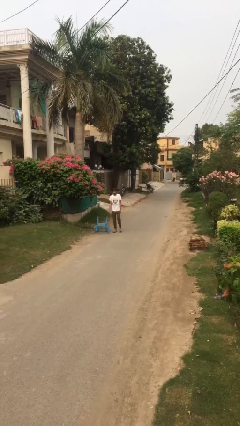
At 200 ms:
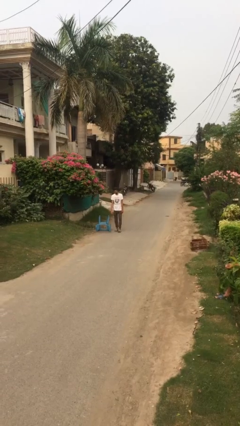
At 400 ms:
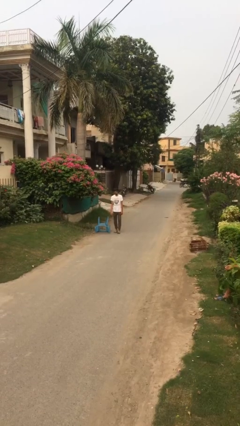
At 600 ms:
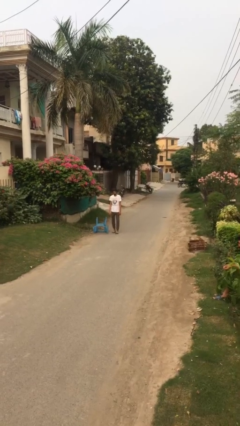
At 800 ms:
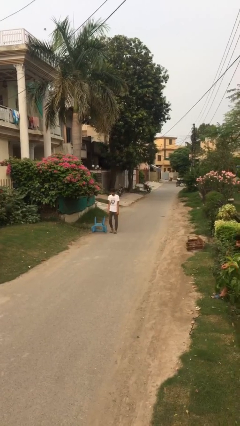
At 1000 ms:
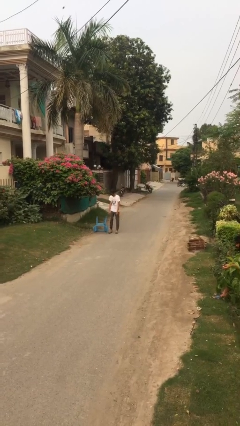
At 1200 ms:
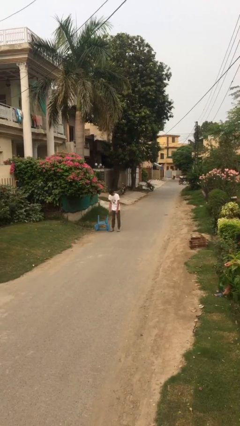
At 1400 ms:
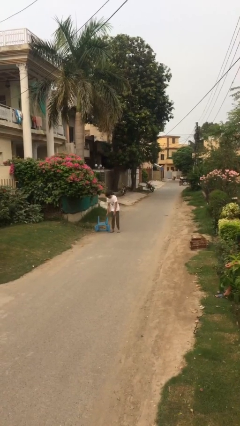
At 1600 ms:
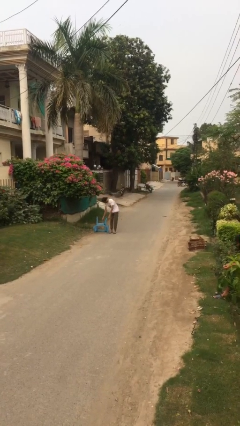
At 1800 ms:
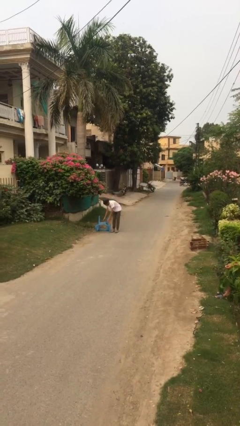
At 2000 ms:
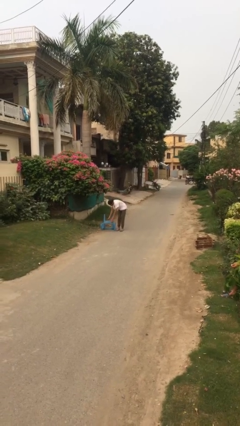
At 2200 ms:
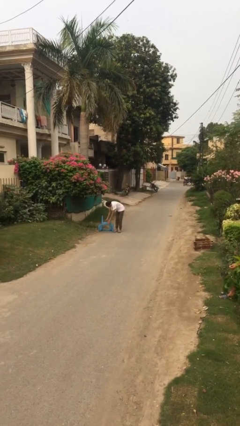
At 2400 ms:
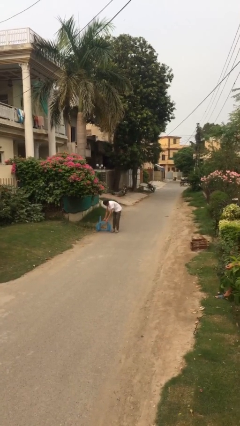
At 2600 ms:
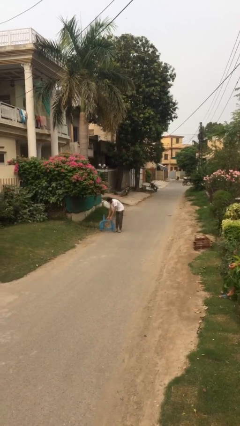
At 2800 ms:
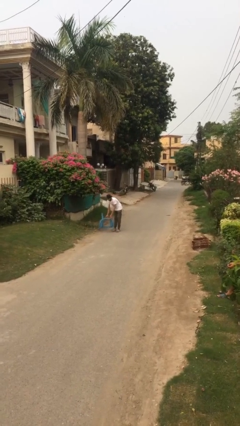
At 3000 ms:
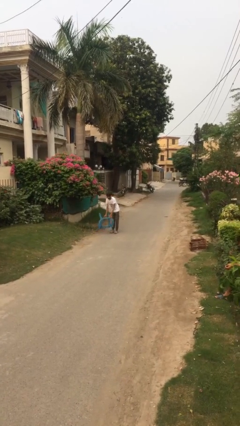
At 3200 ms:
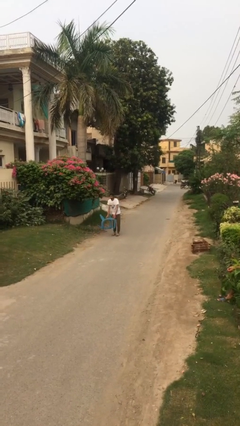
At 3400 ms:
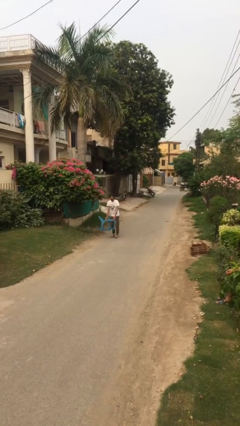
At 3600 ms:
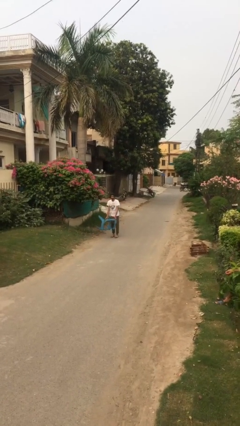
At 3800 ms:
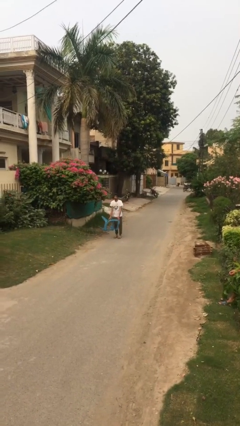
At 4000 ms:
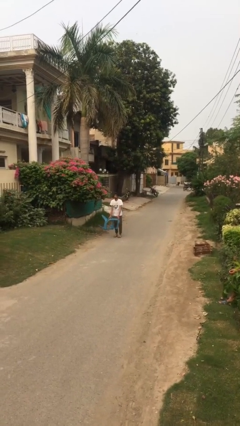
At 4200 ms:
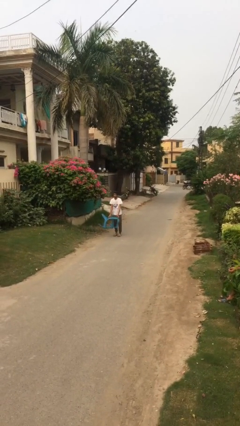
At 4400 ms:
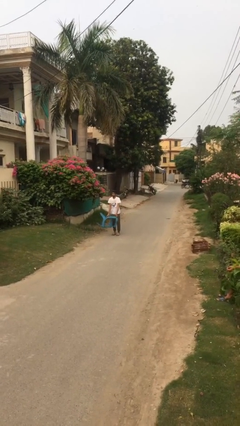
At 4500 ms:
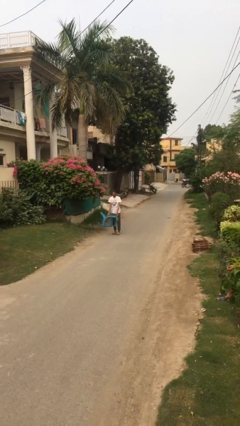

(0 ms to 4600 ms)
person picks up object from floor

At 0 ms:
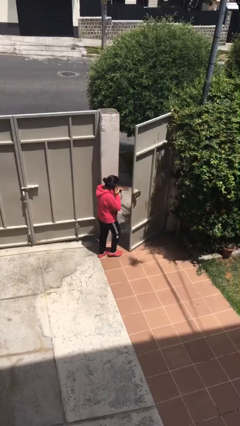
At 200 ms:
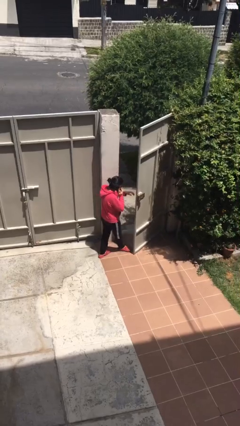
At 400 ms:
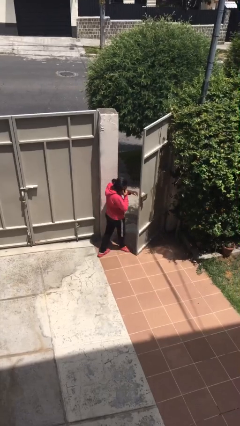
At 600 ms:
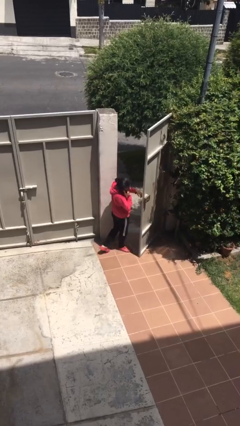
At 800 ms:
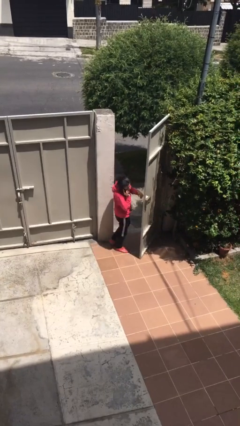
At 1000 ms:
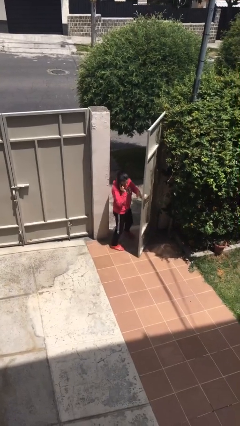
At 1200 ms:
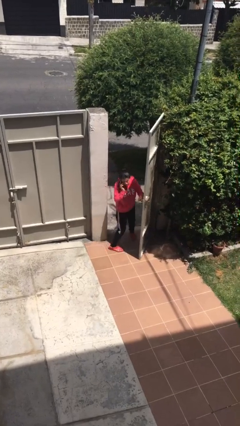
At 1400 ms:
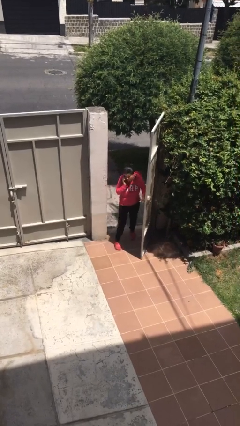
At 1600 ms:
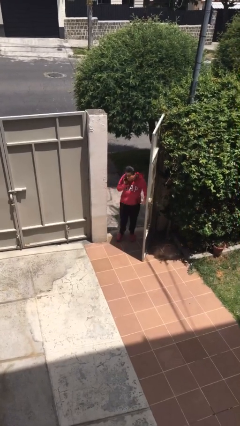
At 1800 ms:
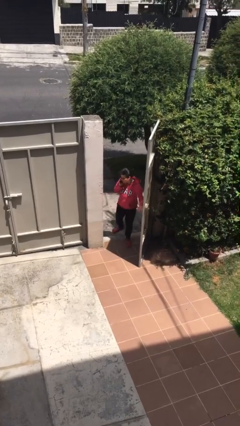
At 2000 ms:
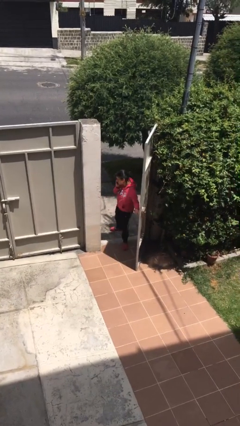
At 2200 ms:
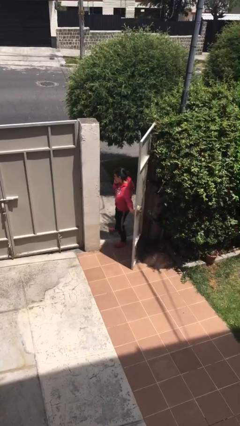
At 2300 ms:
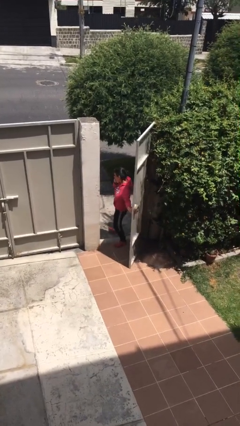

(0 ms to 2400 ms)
person exits scene through structure

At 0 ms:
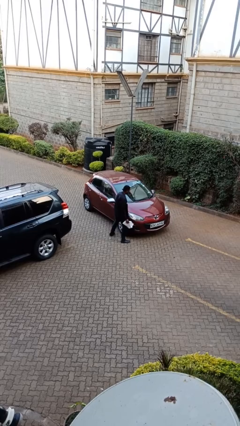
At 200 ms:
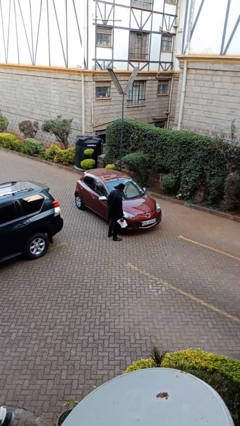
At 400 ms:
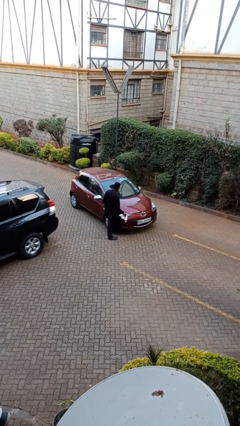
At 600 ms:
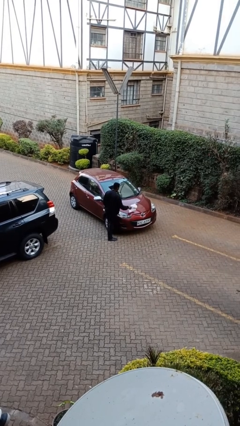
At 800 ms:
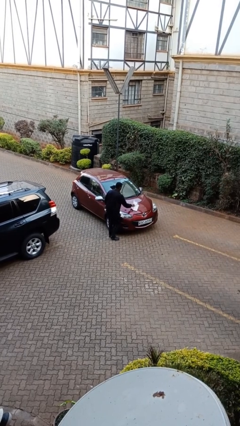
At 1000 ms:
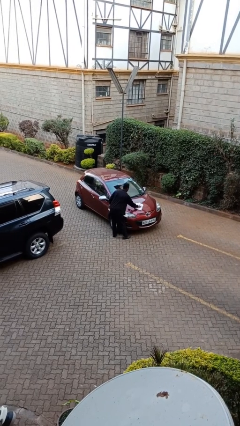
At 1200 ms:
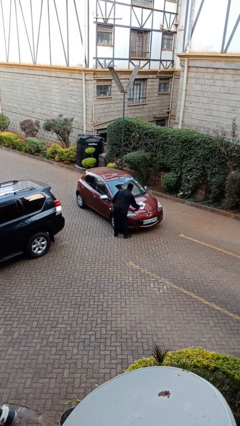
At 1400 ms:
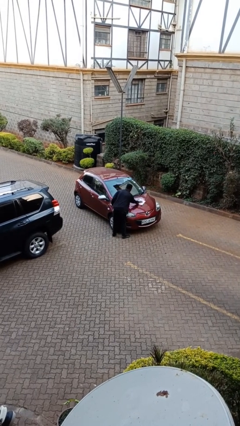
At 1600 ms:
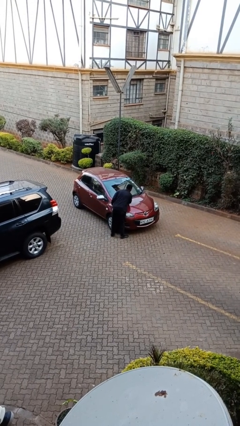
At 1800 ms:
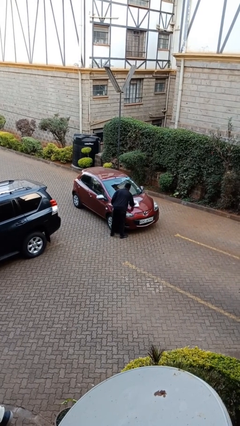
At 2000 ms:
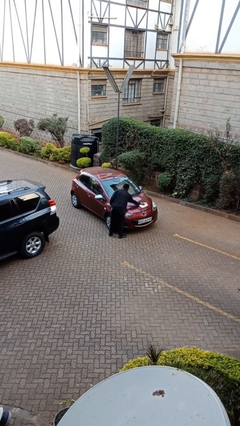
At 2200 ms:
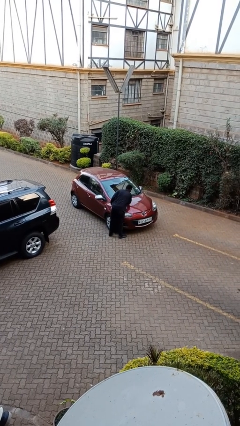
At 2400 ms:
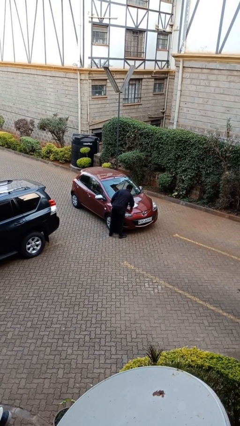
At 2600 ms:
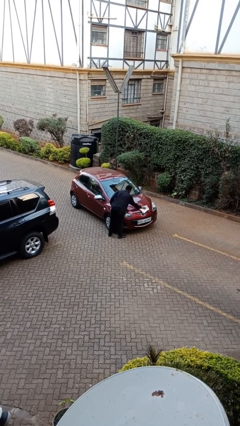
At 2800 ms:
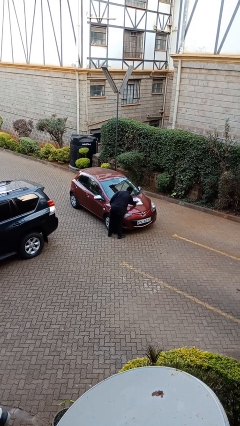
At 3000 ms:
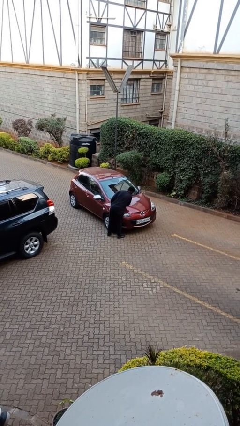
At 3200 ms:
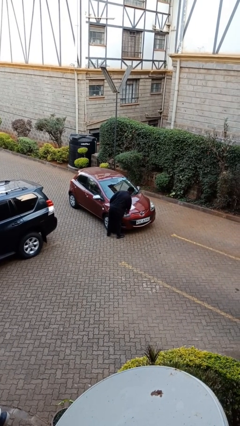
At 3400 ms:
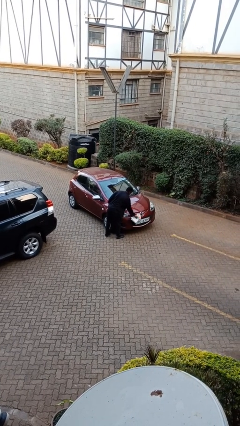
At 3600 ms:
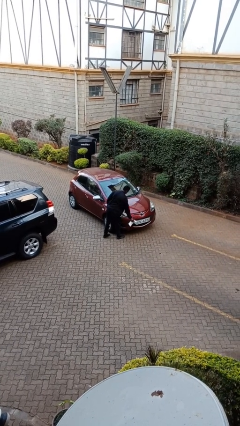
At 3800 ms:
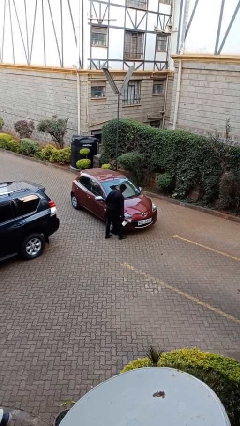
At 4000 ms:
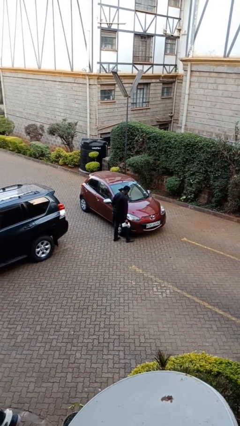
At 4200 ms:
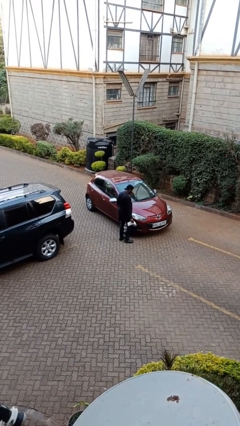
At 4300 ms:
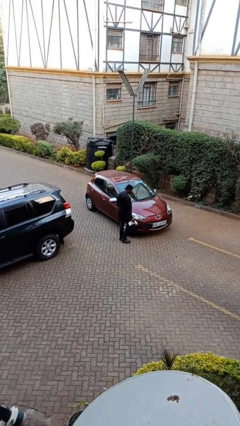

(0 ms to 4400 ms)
person polishes car with rag

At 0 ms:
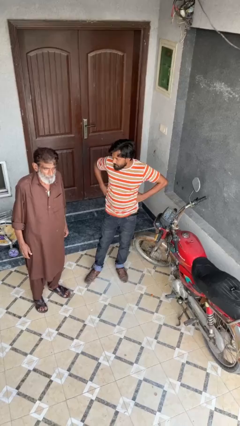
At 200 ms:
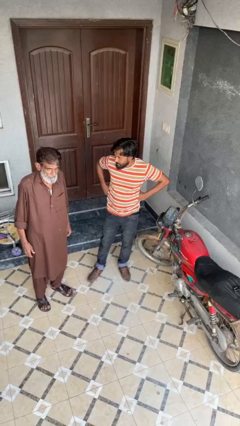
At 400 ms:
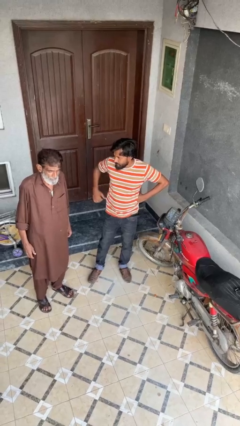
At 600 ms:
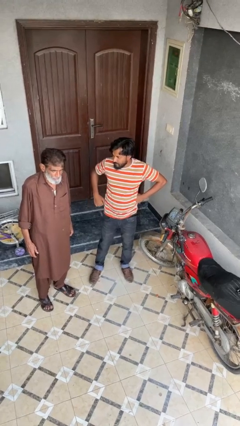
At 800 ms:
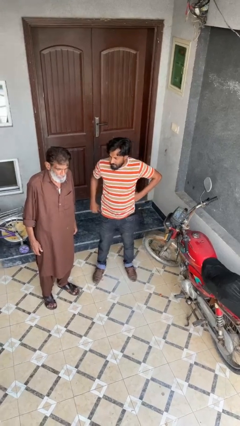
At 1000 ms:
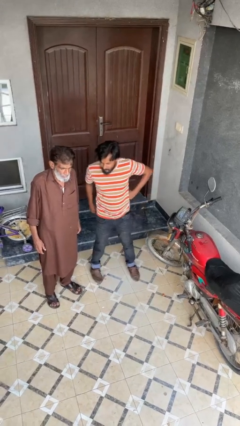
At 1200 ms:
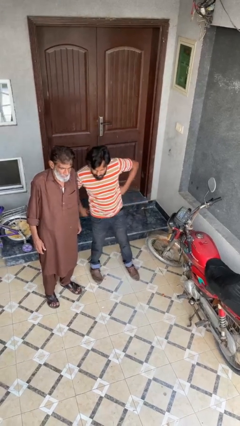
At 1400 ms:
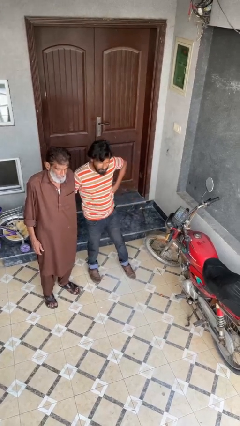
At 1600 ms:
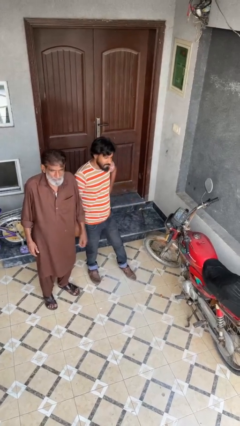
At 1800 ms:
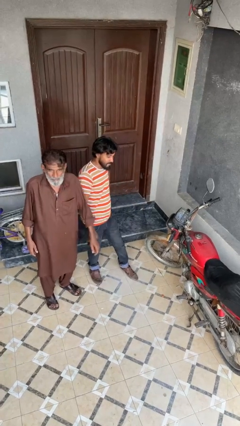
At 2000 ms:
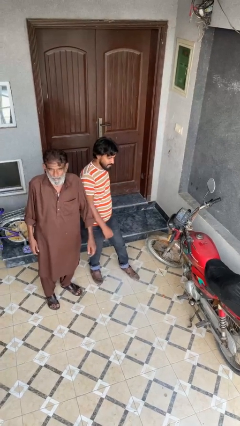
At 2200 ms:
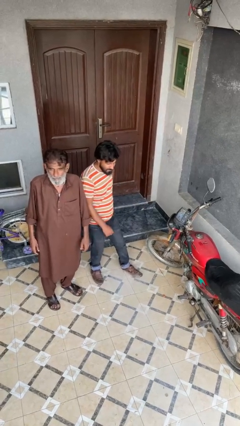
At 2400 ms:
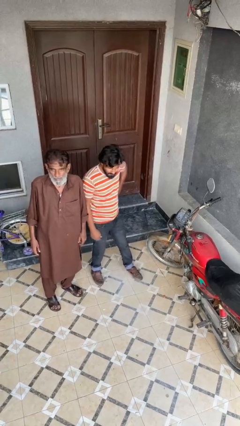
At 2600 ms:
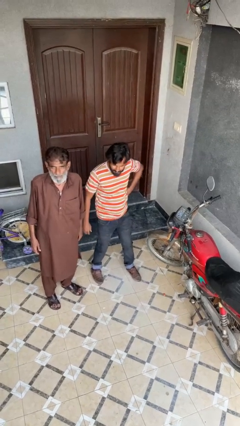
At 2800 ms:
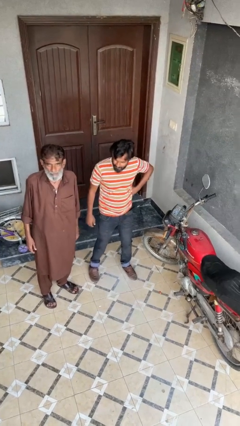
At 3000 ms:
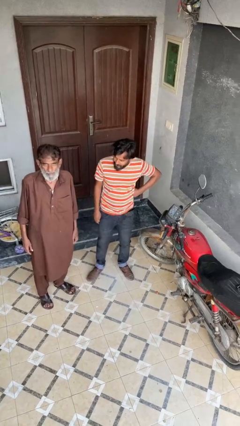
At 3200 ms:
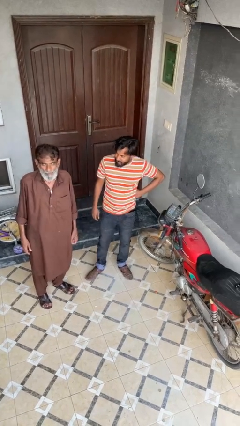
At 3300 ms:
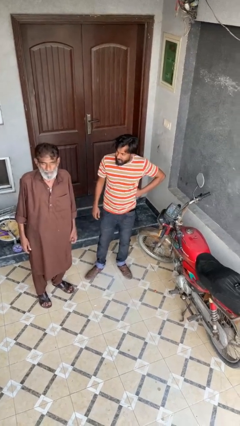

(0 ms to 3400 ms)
person nudges person with elbow

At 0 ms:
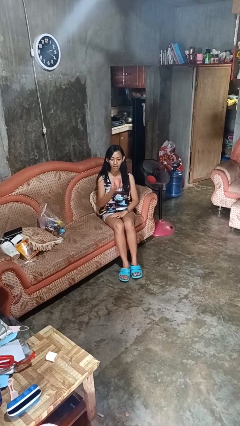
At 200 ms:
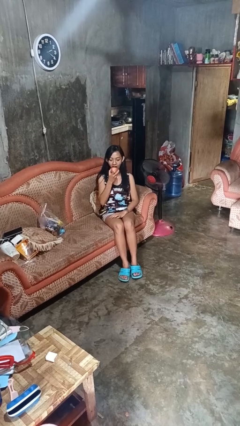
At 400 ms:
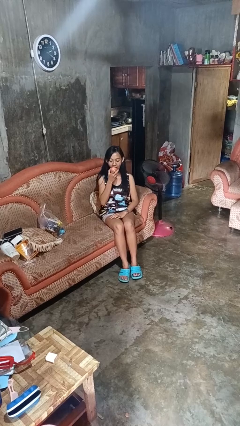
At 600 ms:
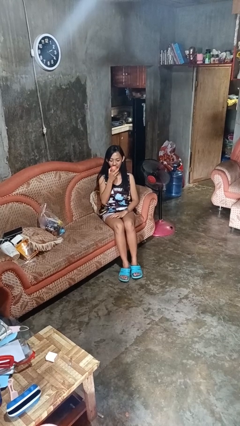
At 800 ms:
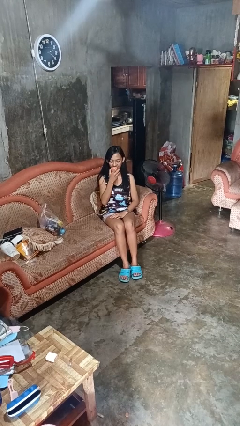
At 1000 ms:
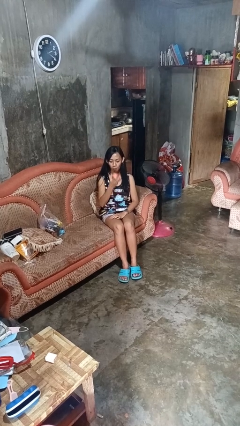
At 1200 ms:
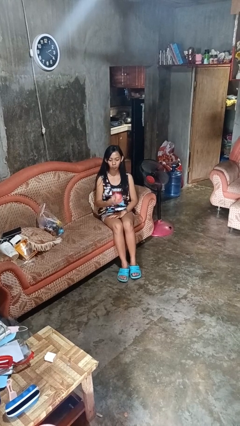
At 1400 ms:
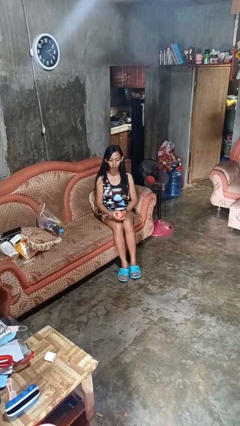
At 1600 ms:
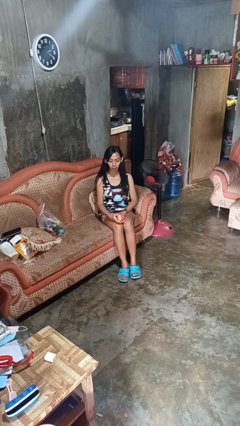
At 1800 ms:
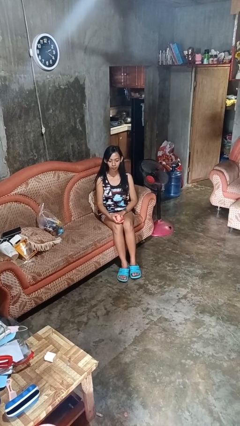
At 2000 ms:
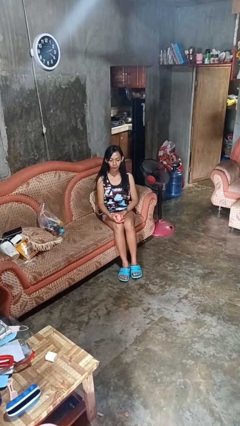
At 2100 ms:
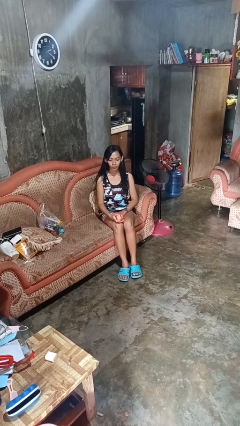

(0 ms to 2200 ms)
person eats apple
